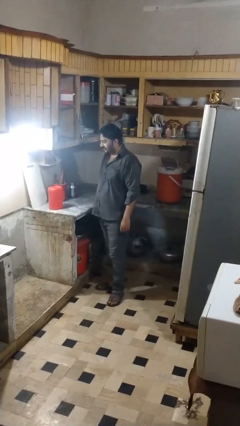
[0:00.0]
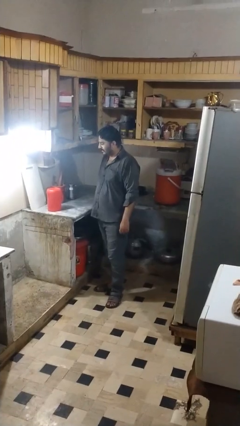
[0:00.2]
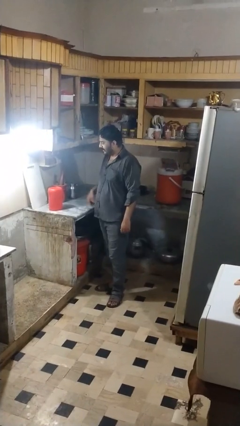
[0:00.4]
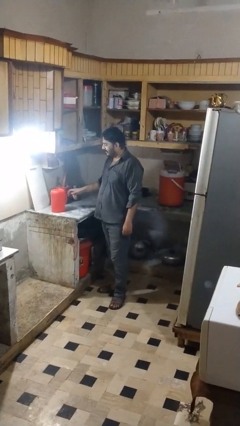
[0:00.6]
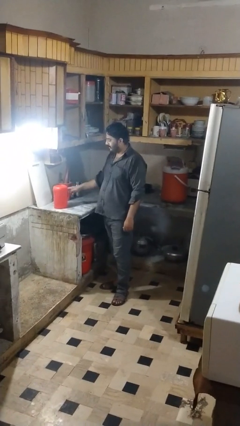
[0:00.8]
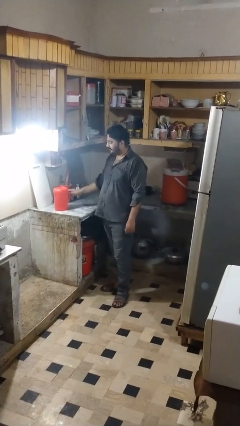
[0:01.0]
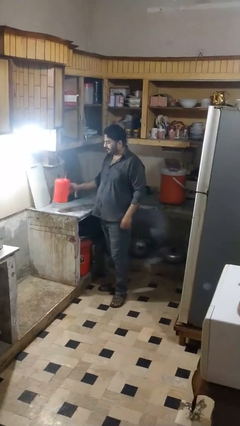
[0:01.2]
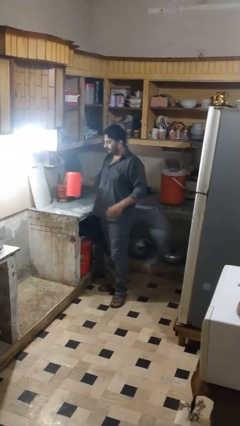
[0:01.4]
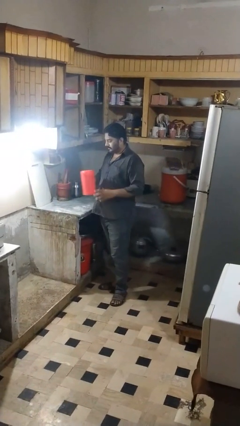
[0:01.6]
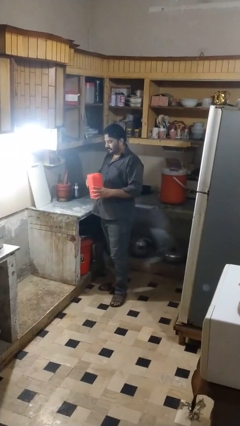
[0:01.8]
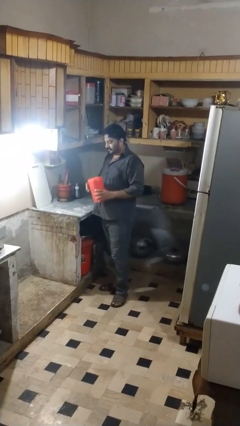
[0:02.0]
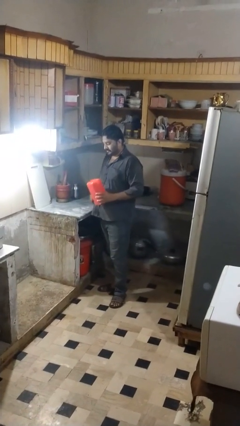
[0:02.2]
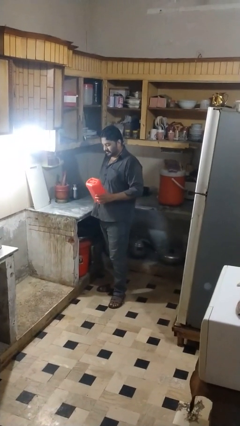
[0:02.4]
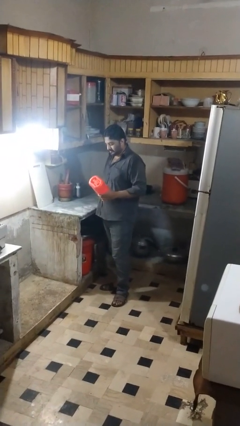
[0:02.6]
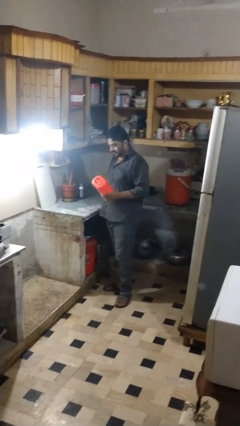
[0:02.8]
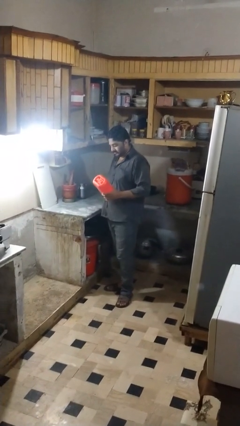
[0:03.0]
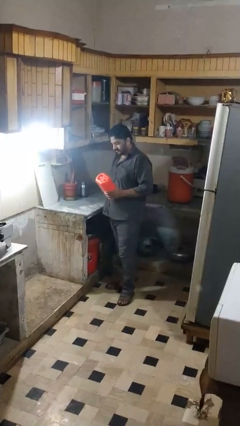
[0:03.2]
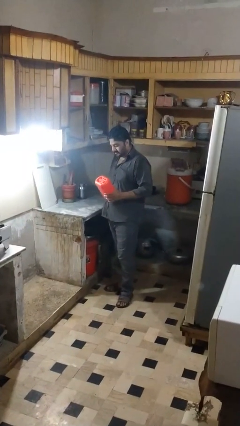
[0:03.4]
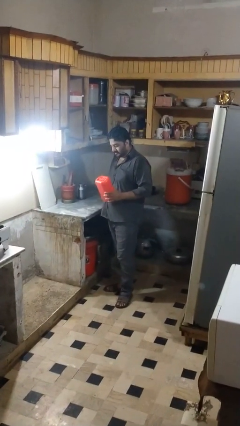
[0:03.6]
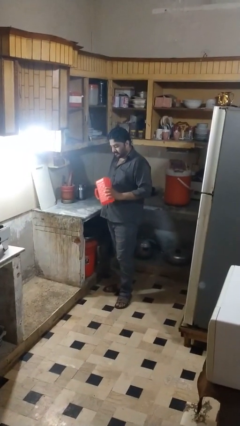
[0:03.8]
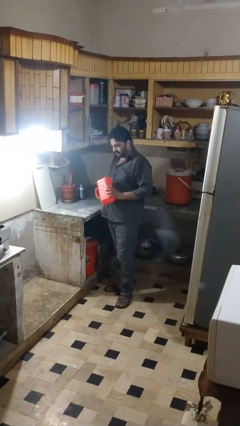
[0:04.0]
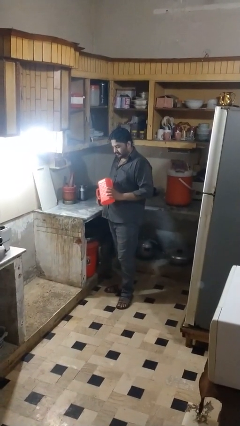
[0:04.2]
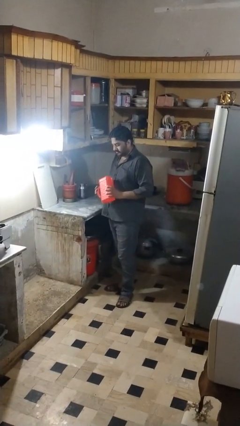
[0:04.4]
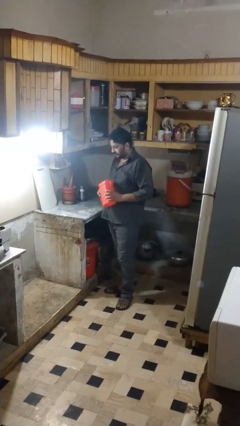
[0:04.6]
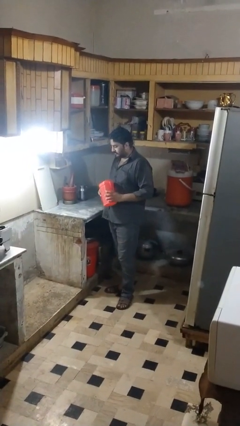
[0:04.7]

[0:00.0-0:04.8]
person picks up object from countertop

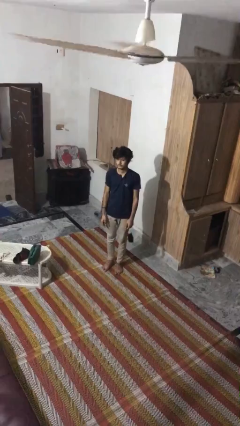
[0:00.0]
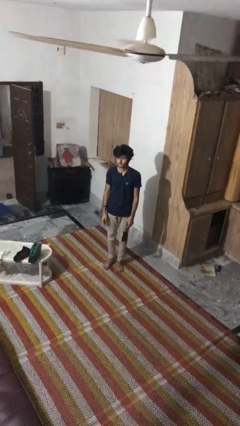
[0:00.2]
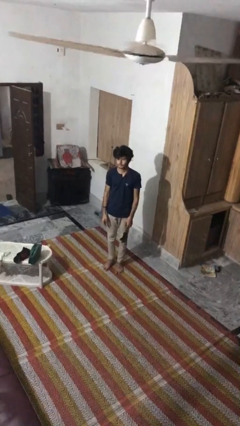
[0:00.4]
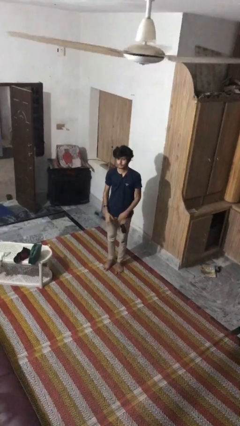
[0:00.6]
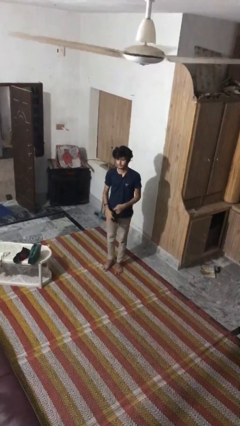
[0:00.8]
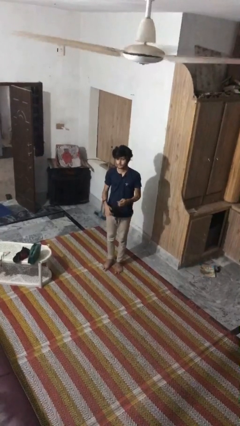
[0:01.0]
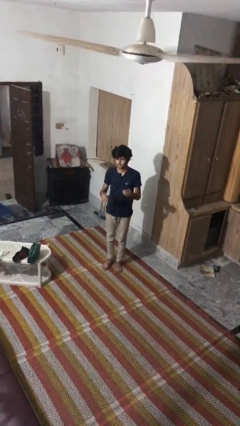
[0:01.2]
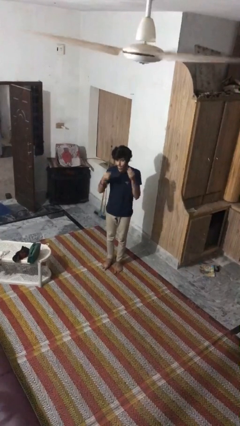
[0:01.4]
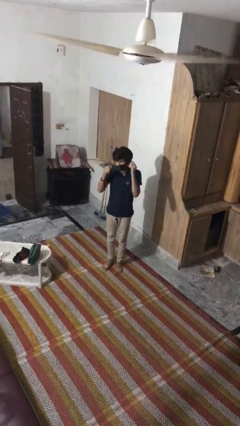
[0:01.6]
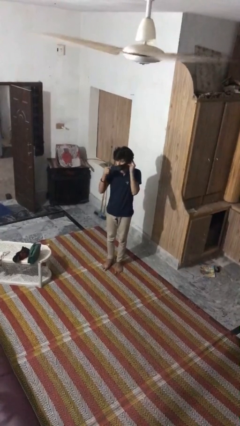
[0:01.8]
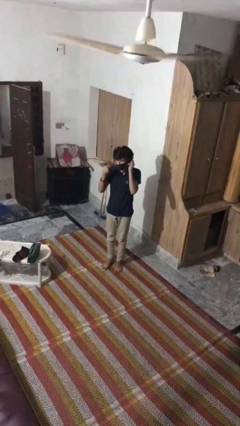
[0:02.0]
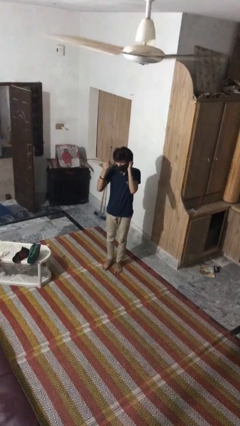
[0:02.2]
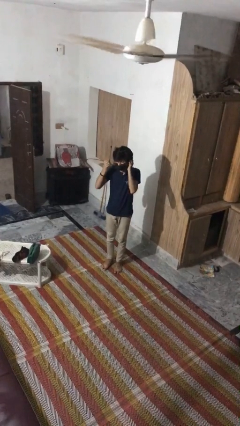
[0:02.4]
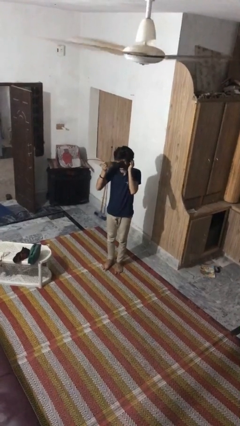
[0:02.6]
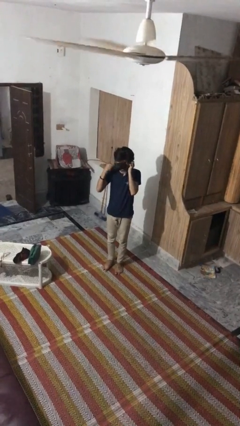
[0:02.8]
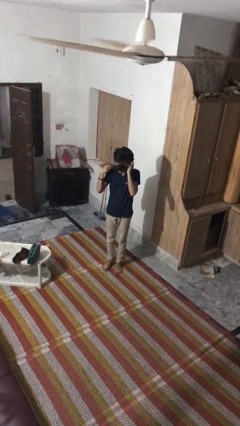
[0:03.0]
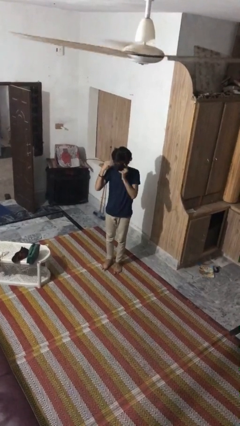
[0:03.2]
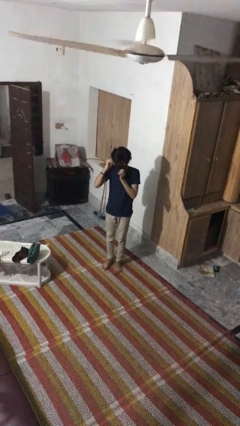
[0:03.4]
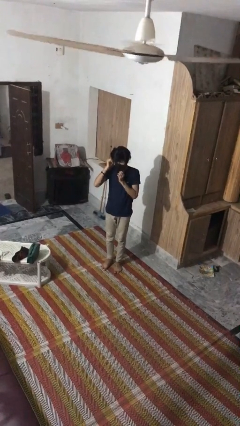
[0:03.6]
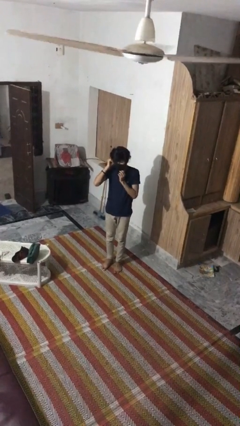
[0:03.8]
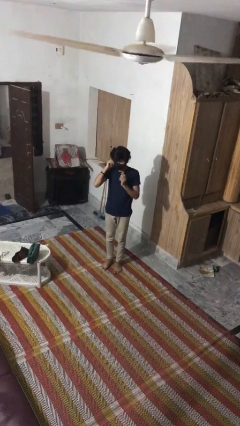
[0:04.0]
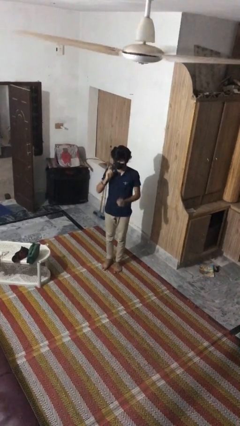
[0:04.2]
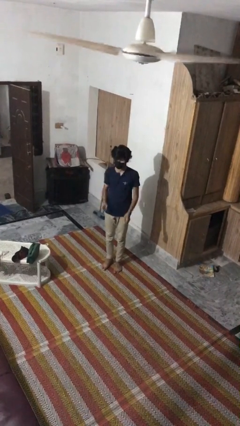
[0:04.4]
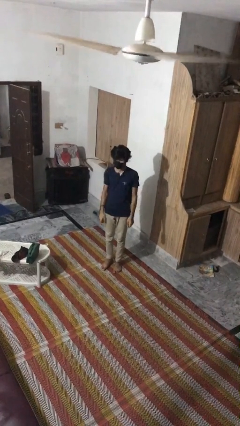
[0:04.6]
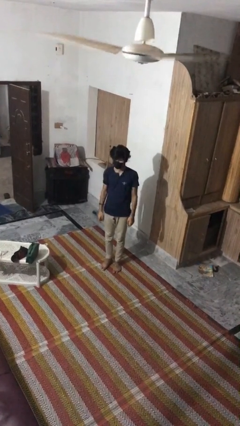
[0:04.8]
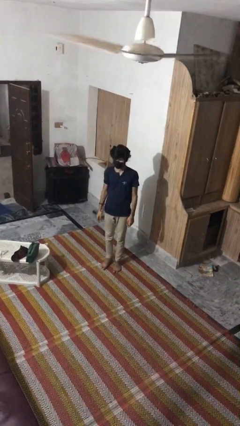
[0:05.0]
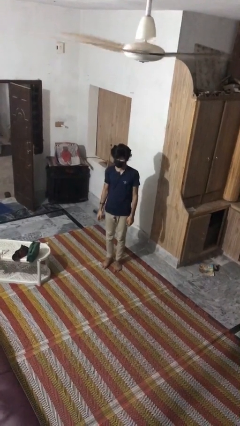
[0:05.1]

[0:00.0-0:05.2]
person puts on facemask

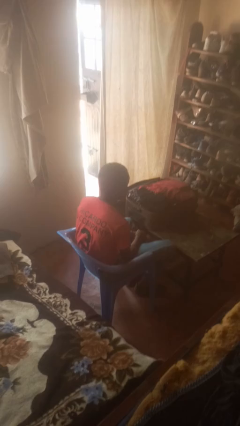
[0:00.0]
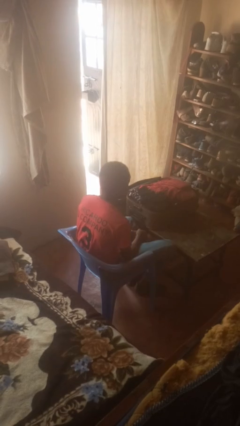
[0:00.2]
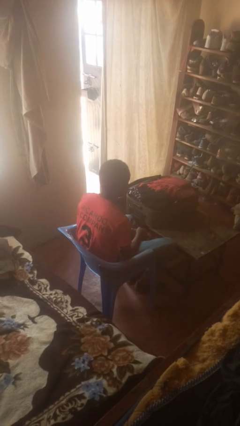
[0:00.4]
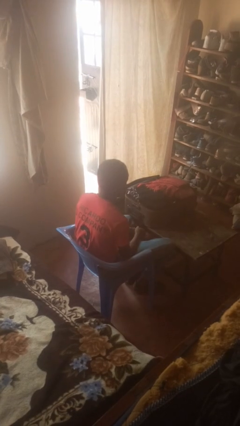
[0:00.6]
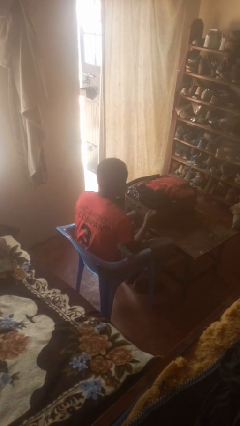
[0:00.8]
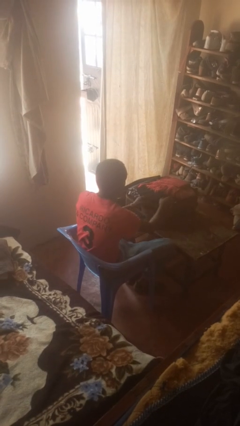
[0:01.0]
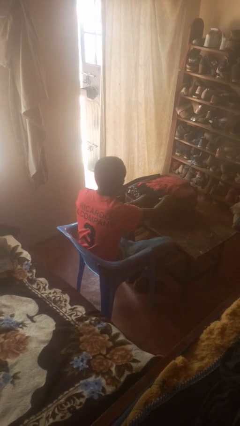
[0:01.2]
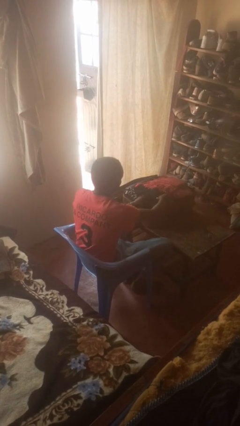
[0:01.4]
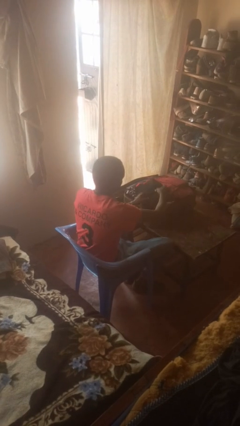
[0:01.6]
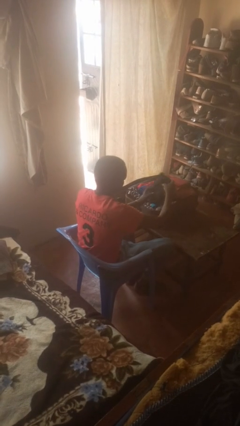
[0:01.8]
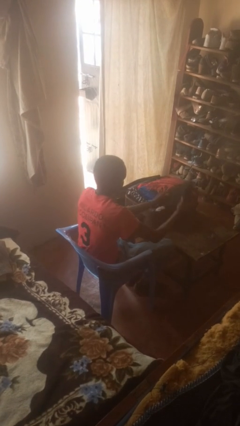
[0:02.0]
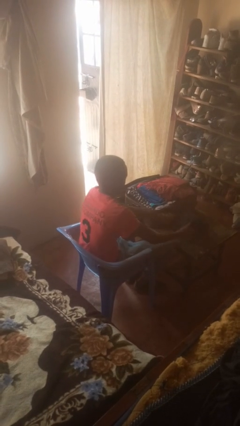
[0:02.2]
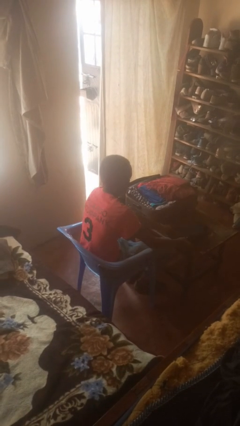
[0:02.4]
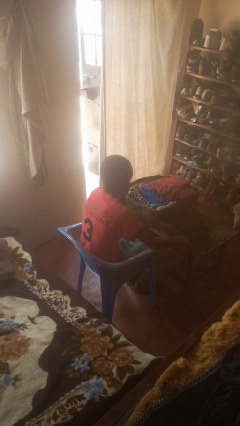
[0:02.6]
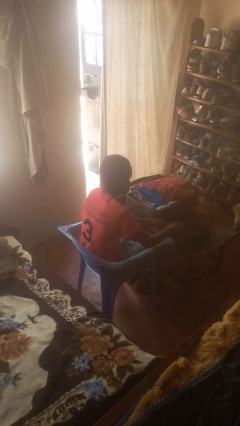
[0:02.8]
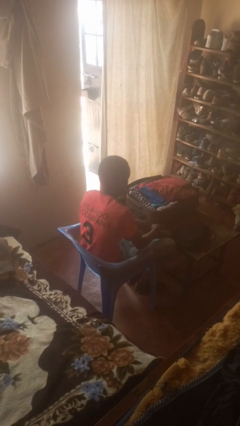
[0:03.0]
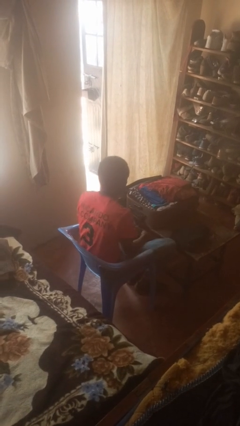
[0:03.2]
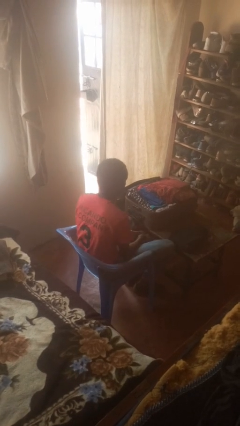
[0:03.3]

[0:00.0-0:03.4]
person unloads clothes from suitcase

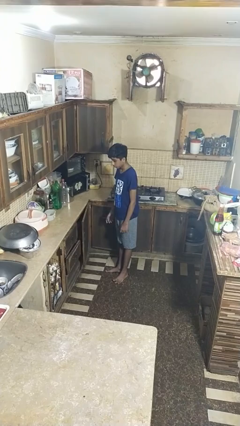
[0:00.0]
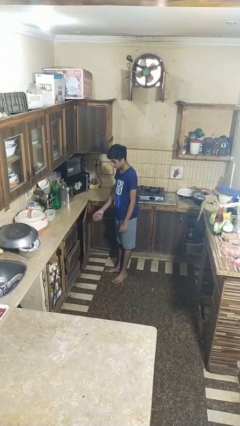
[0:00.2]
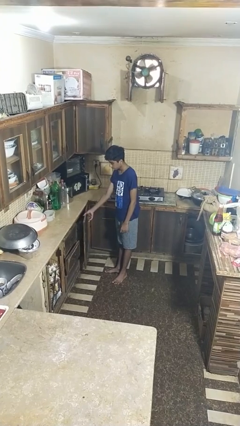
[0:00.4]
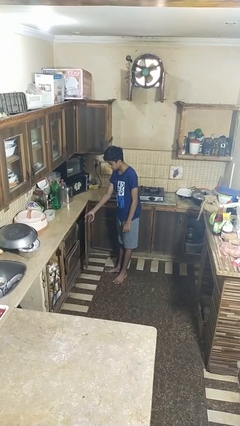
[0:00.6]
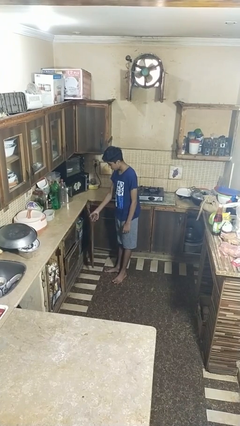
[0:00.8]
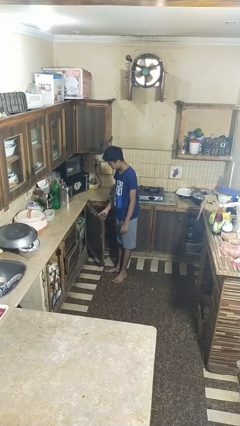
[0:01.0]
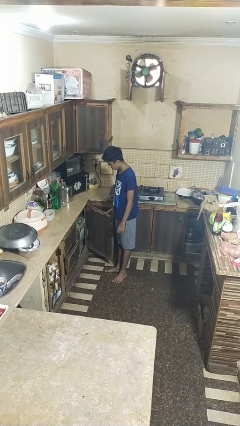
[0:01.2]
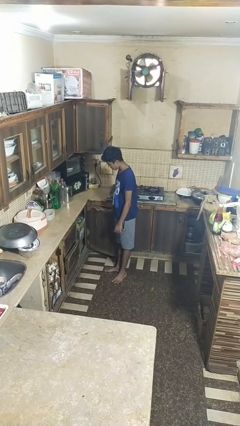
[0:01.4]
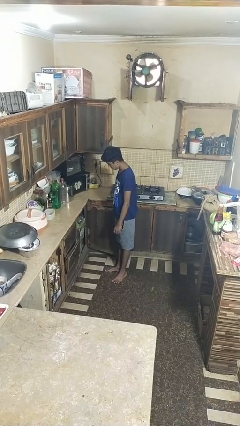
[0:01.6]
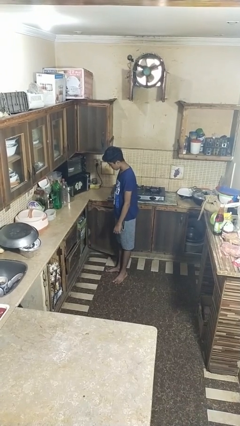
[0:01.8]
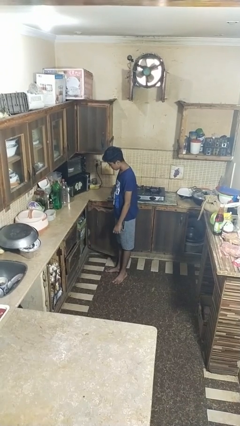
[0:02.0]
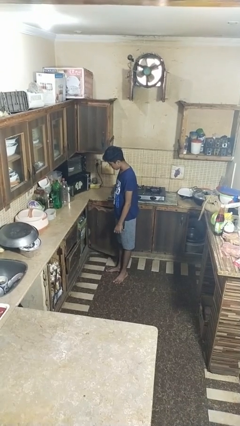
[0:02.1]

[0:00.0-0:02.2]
person opens closet door

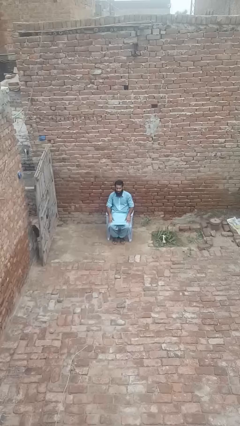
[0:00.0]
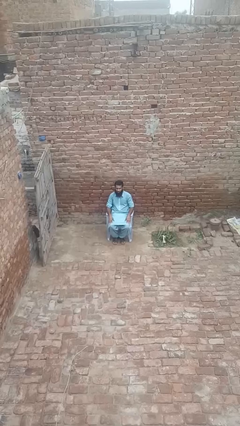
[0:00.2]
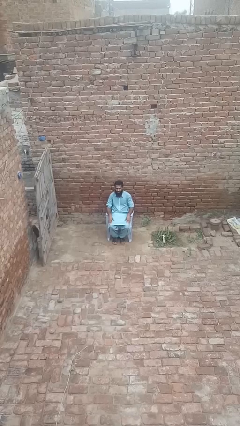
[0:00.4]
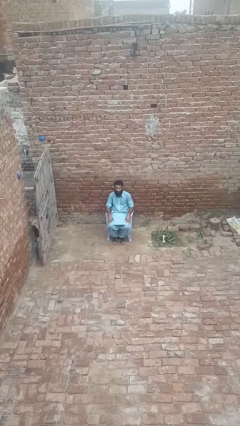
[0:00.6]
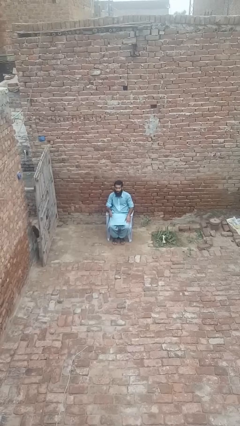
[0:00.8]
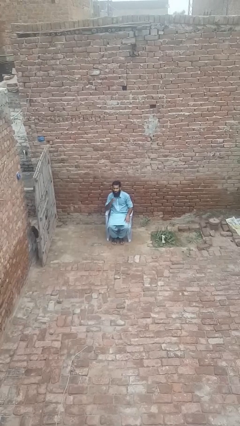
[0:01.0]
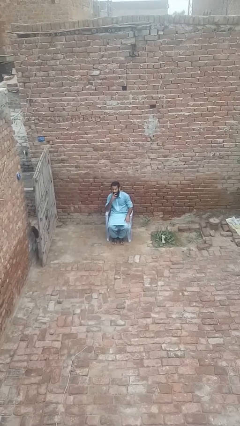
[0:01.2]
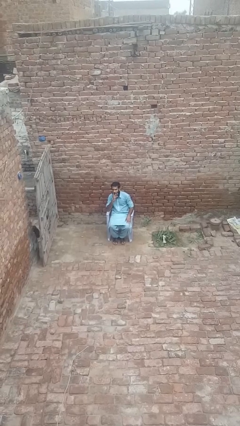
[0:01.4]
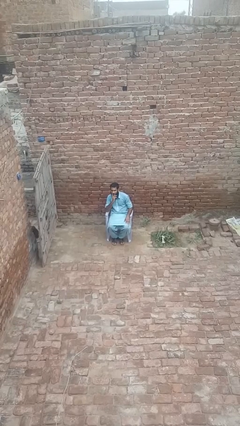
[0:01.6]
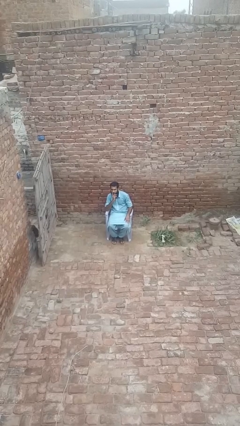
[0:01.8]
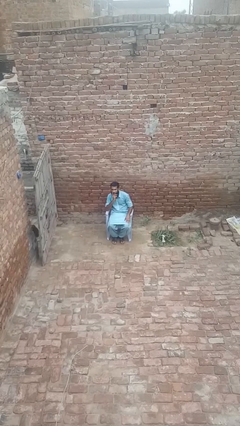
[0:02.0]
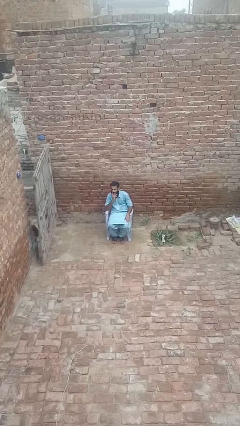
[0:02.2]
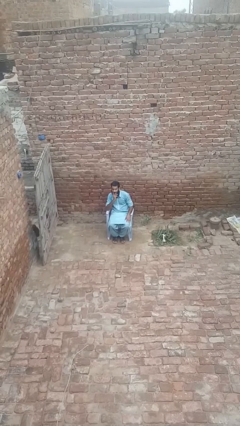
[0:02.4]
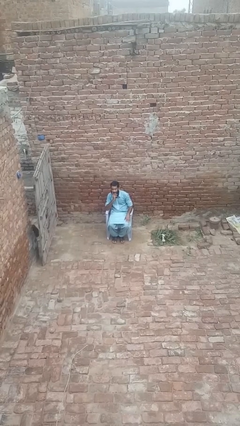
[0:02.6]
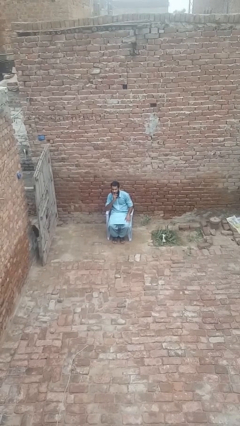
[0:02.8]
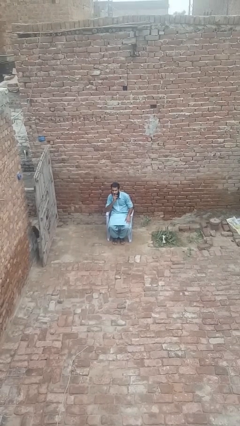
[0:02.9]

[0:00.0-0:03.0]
person strokes chin
